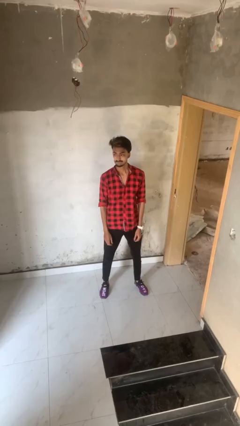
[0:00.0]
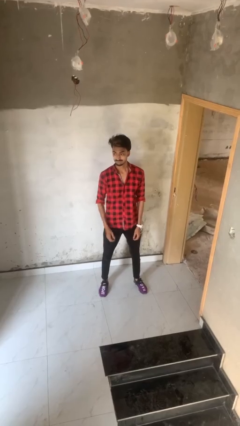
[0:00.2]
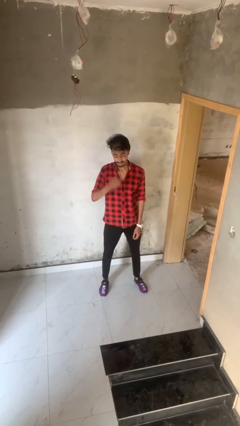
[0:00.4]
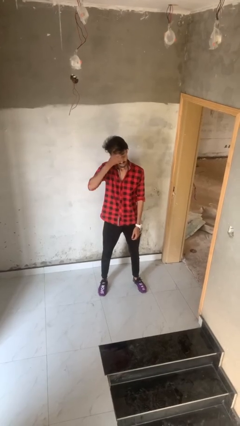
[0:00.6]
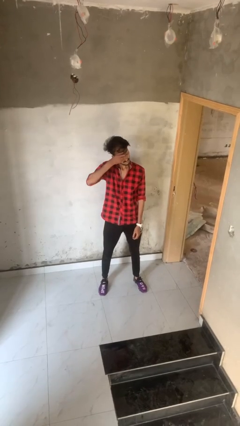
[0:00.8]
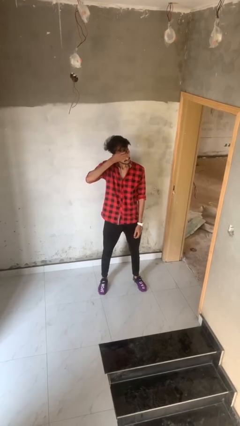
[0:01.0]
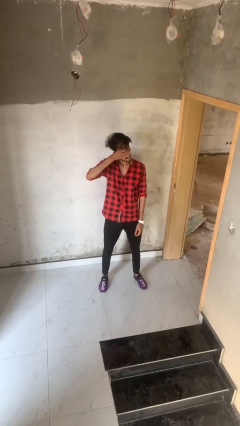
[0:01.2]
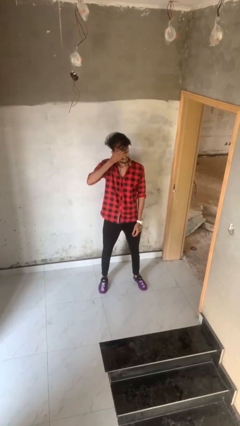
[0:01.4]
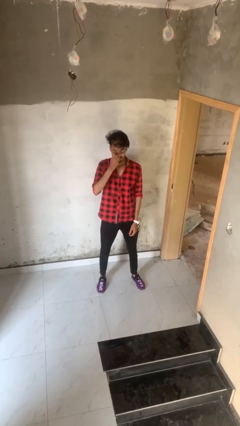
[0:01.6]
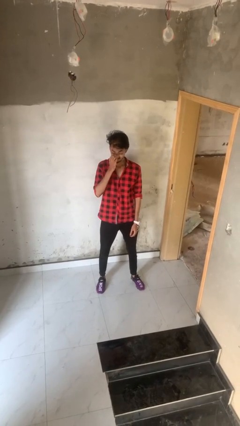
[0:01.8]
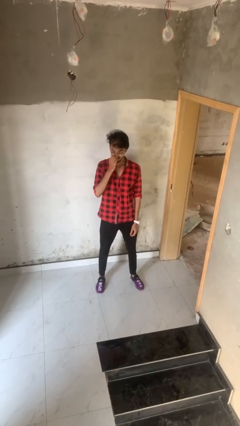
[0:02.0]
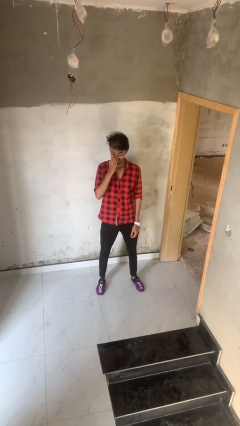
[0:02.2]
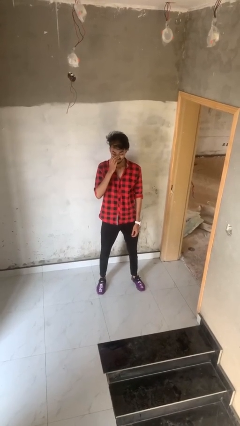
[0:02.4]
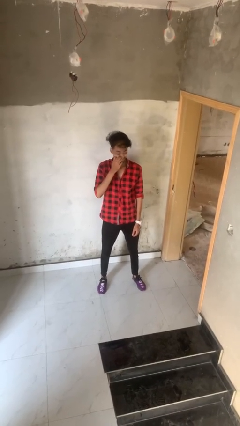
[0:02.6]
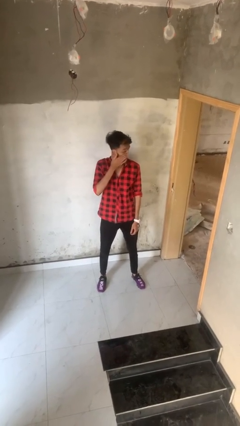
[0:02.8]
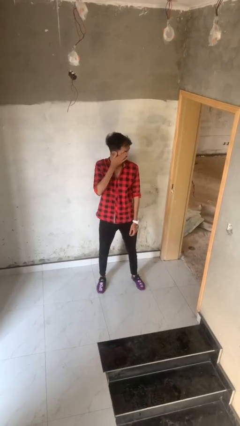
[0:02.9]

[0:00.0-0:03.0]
person scratches face

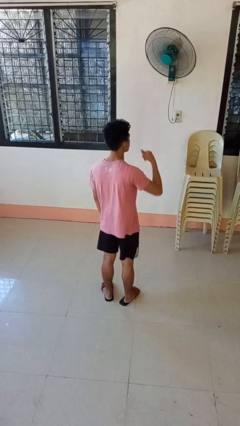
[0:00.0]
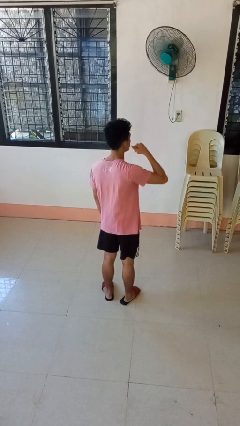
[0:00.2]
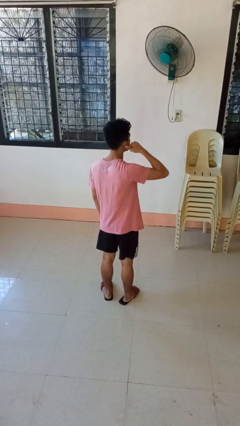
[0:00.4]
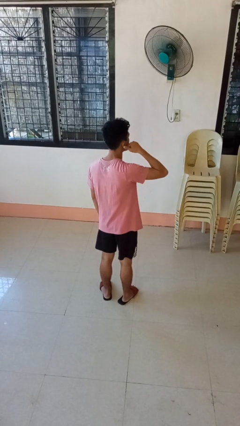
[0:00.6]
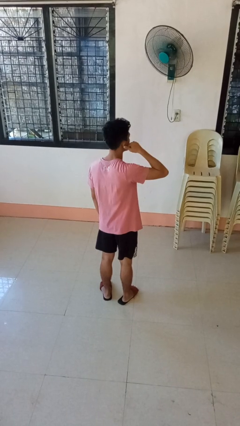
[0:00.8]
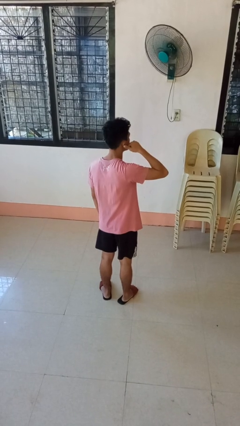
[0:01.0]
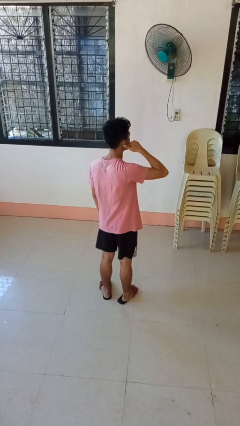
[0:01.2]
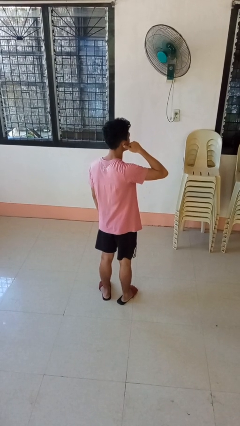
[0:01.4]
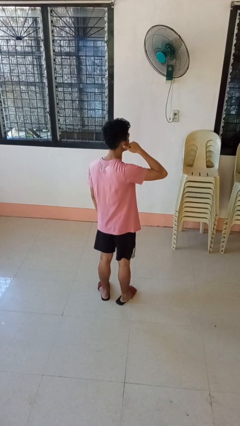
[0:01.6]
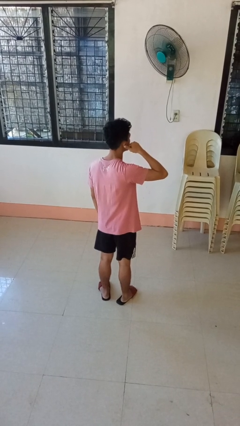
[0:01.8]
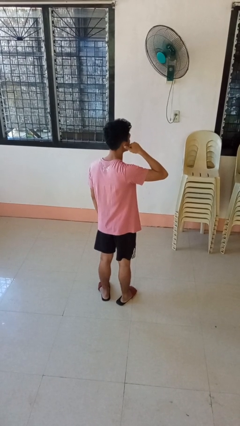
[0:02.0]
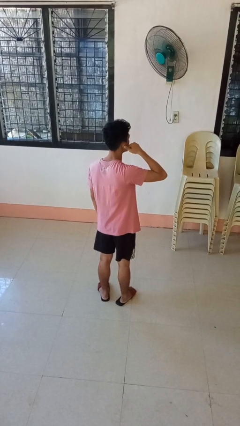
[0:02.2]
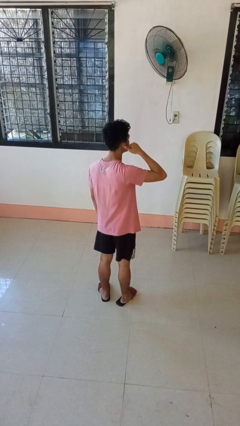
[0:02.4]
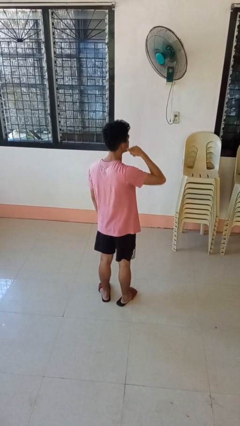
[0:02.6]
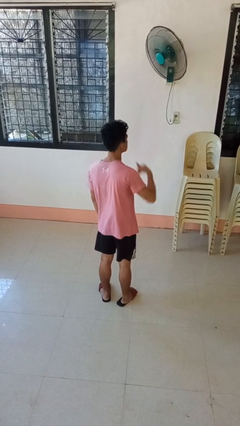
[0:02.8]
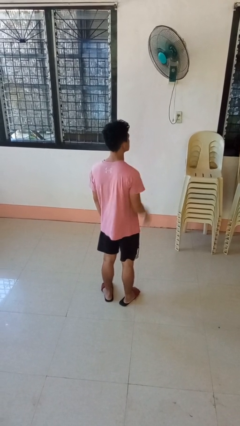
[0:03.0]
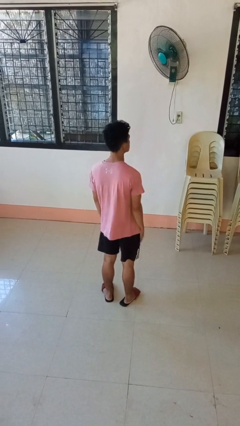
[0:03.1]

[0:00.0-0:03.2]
person gestures call me

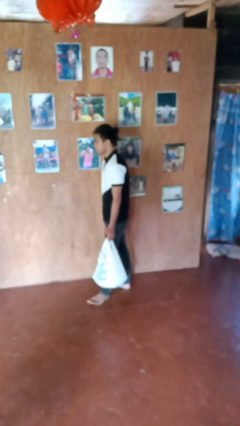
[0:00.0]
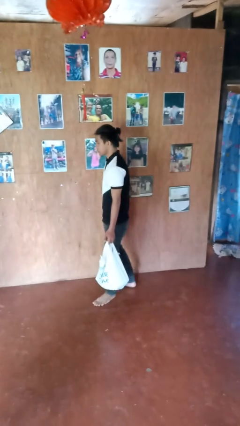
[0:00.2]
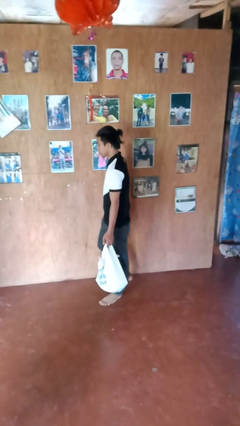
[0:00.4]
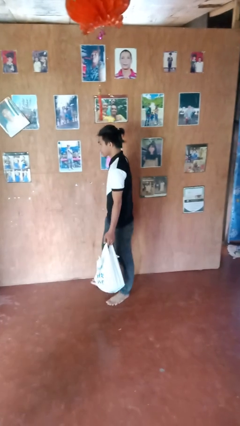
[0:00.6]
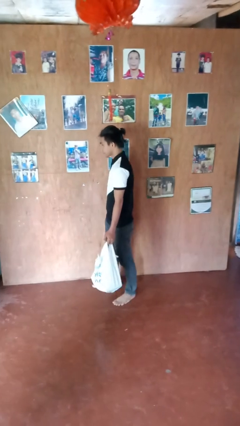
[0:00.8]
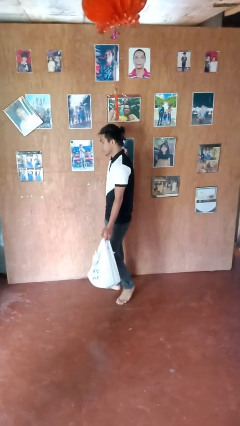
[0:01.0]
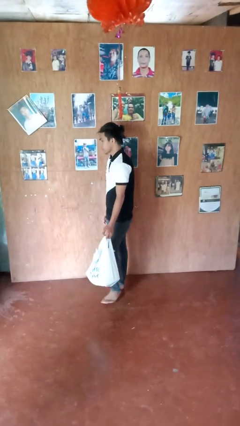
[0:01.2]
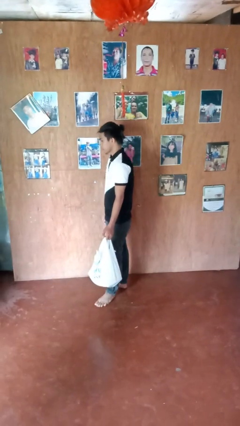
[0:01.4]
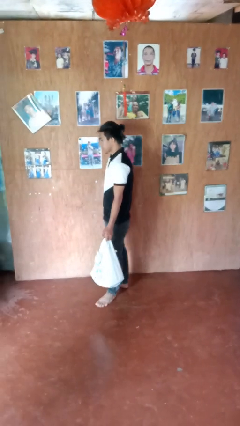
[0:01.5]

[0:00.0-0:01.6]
person carries groceries

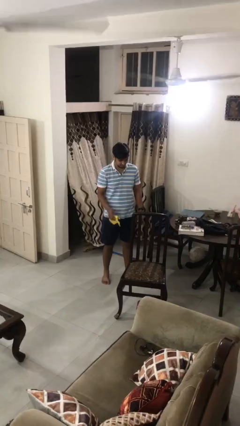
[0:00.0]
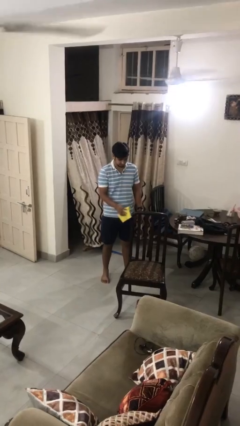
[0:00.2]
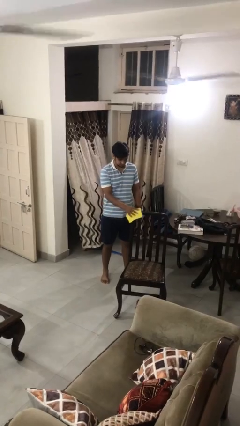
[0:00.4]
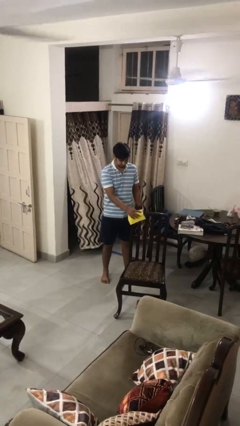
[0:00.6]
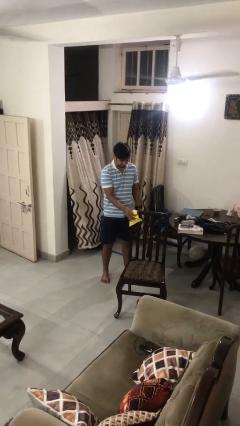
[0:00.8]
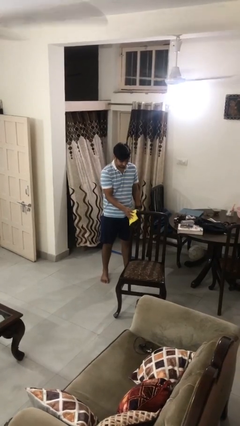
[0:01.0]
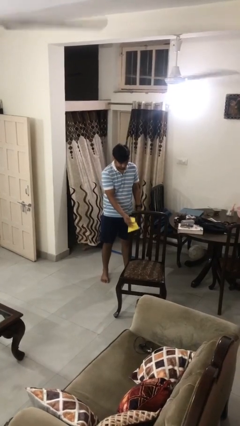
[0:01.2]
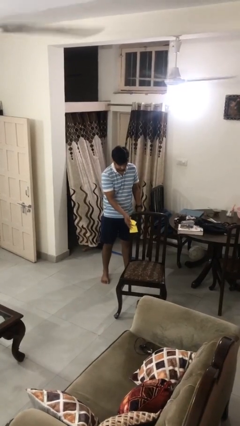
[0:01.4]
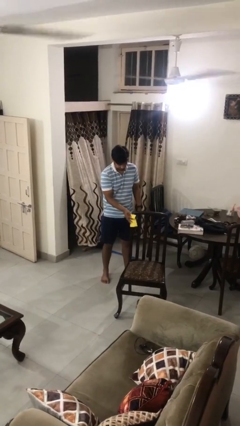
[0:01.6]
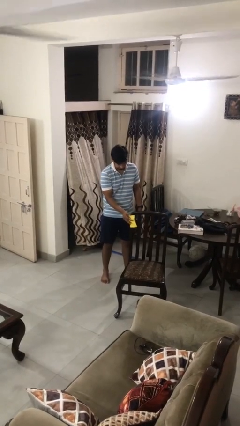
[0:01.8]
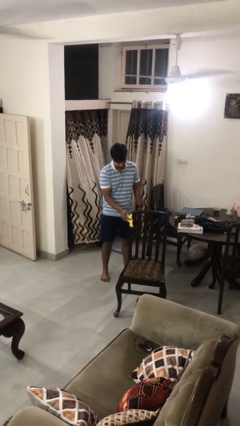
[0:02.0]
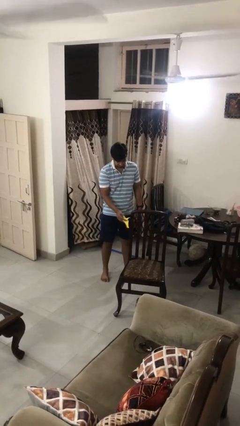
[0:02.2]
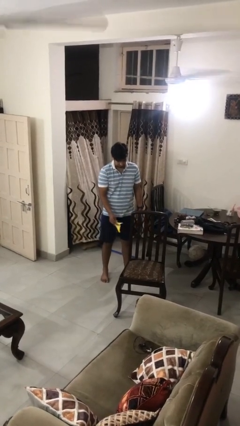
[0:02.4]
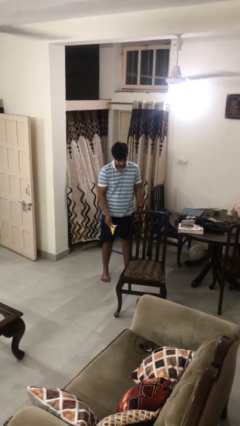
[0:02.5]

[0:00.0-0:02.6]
person dusts furniture

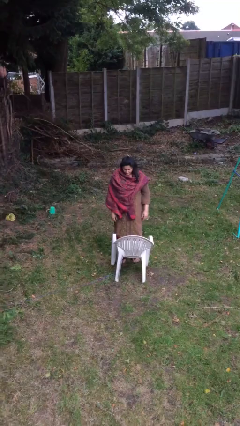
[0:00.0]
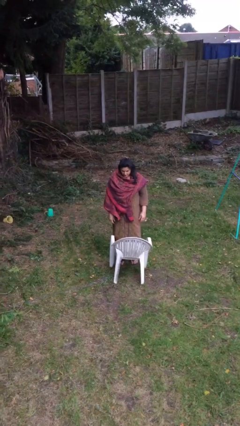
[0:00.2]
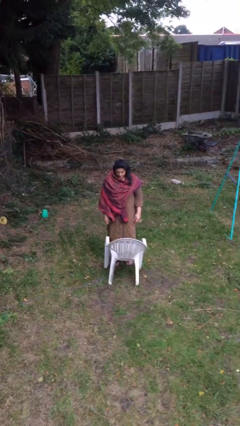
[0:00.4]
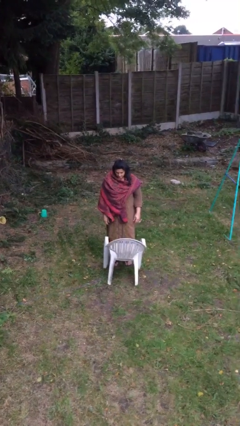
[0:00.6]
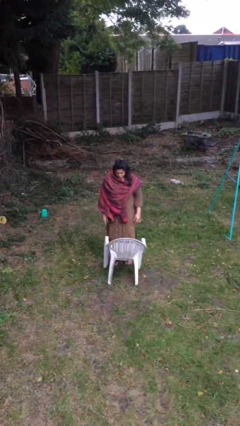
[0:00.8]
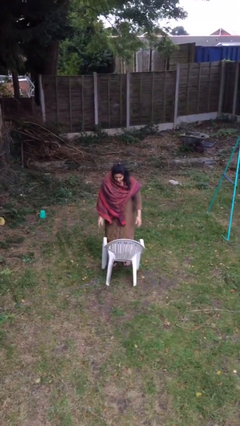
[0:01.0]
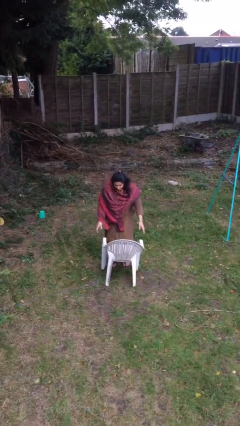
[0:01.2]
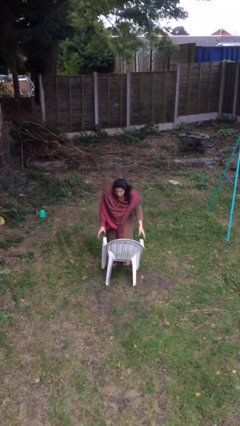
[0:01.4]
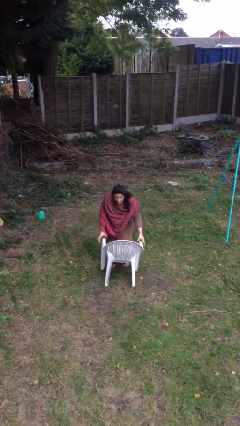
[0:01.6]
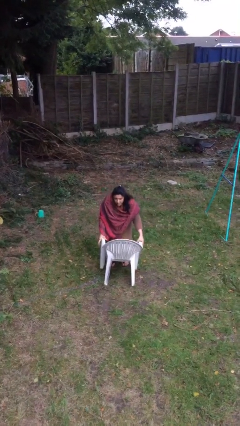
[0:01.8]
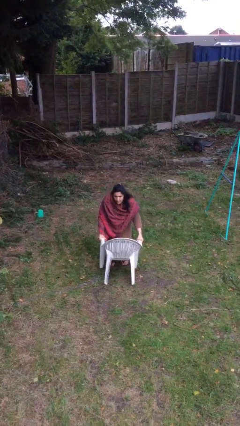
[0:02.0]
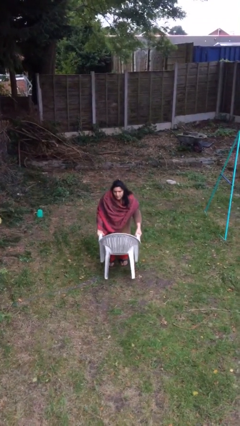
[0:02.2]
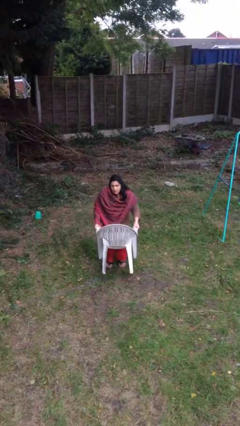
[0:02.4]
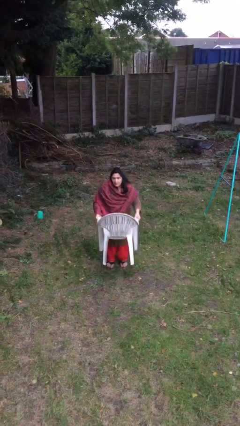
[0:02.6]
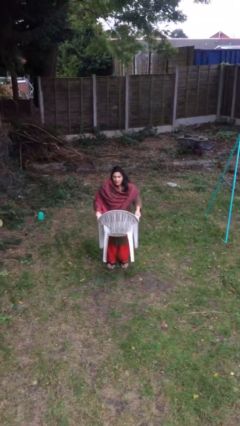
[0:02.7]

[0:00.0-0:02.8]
person picks up object from floor

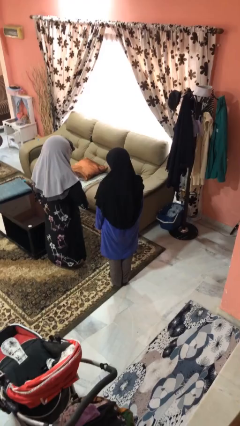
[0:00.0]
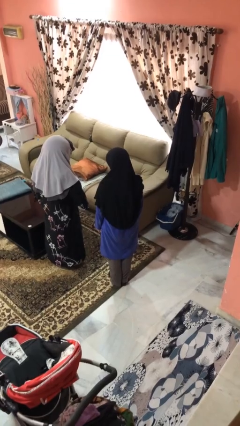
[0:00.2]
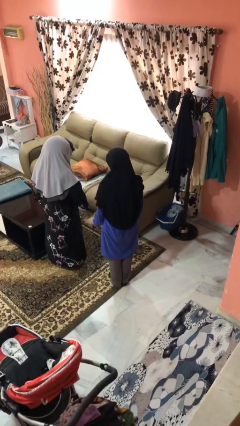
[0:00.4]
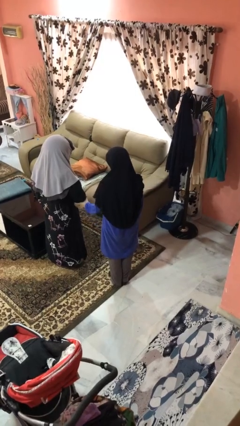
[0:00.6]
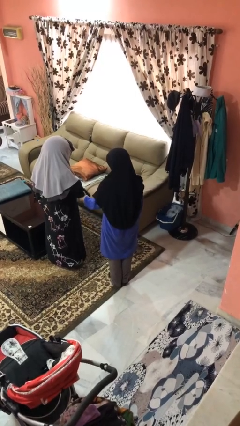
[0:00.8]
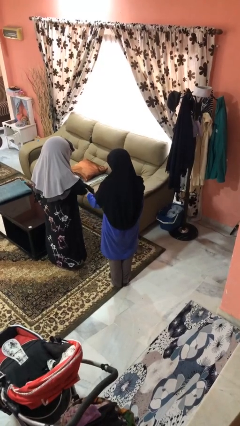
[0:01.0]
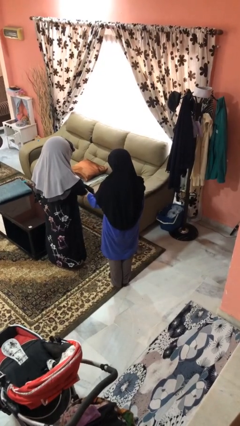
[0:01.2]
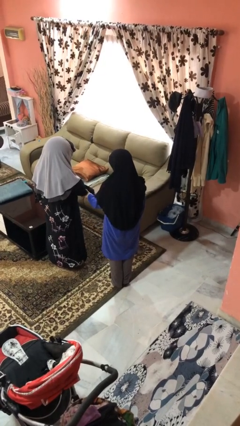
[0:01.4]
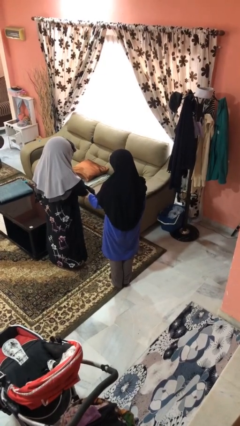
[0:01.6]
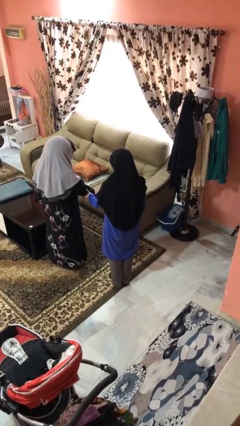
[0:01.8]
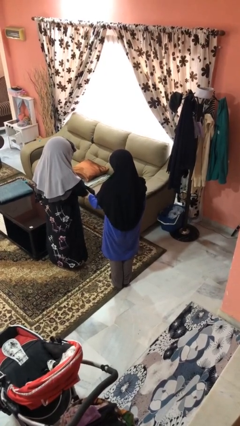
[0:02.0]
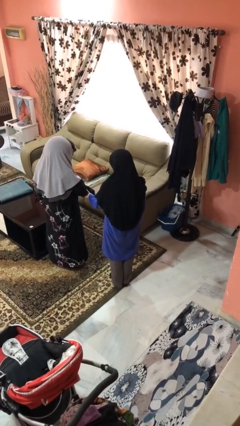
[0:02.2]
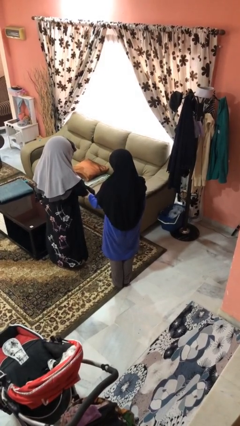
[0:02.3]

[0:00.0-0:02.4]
person grabs person by forearm

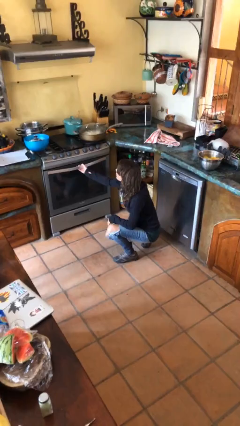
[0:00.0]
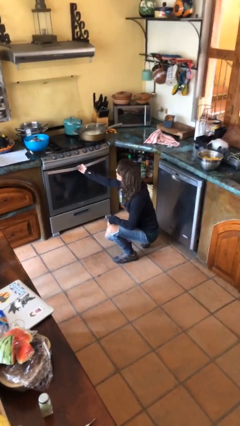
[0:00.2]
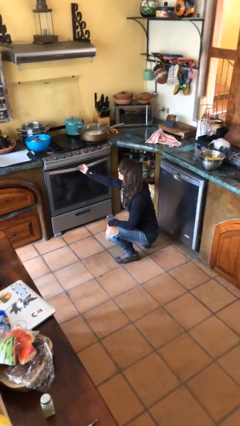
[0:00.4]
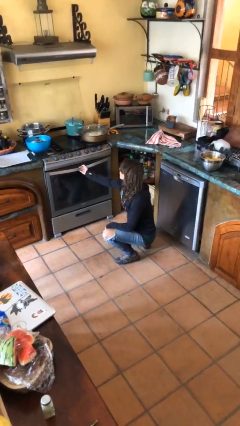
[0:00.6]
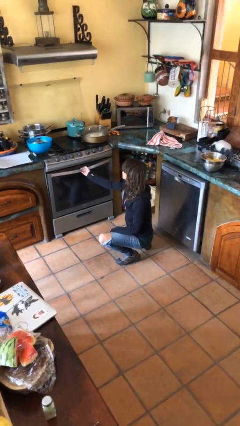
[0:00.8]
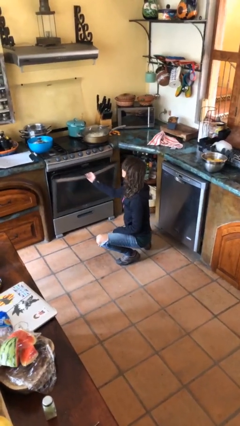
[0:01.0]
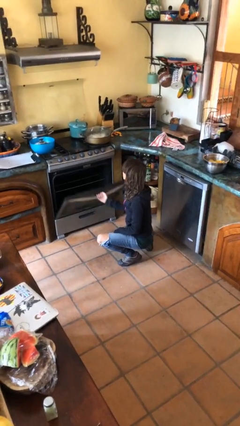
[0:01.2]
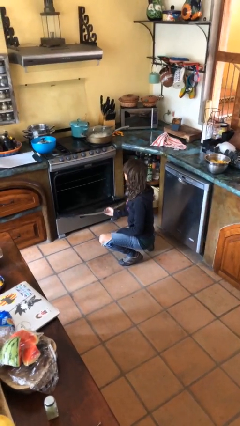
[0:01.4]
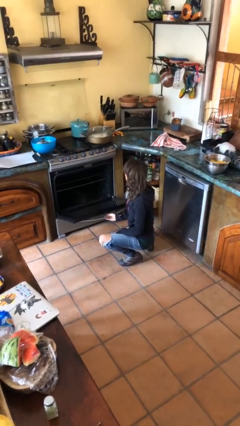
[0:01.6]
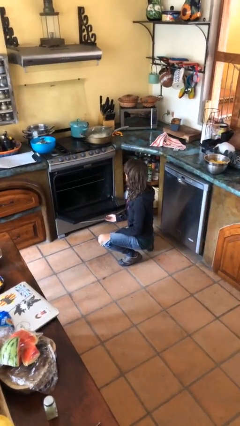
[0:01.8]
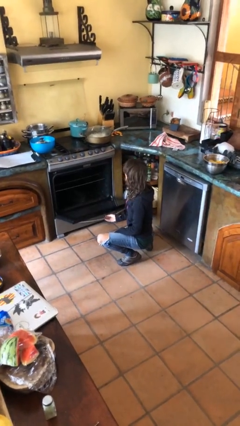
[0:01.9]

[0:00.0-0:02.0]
person opens oven door
